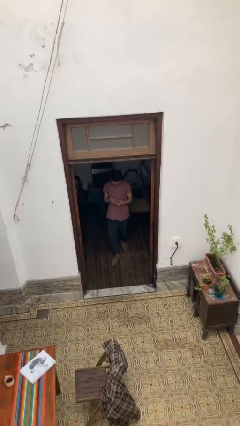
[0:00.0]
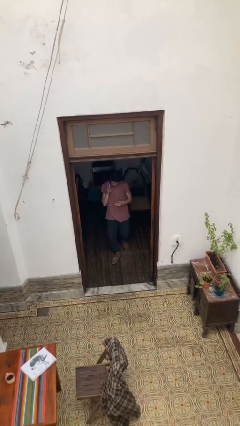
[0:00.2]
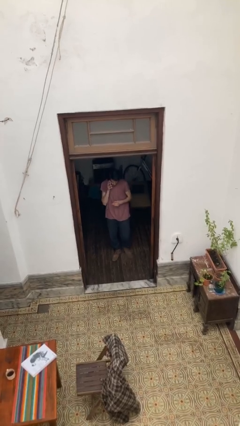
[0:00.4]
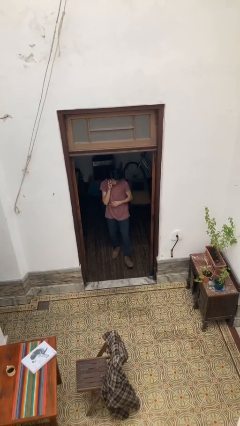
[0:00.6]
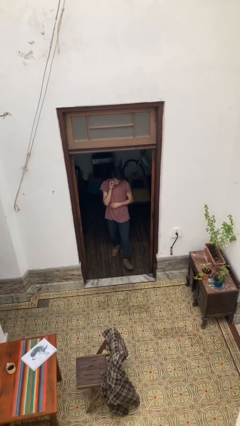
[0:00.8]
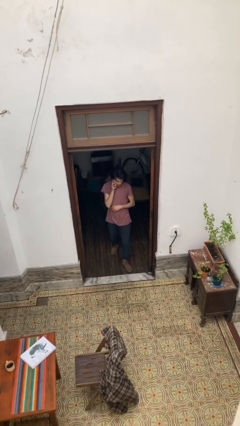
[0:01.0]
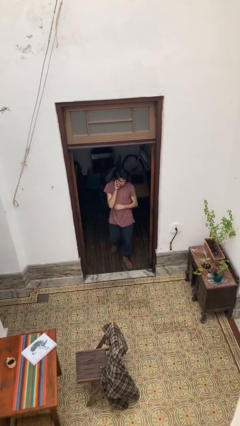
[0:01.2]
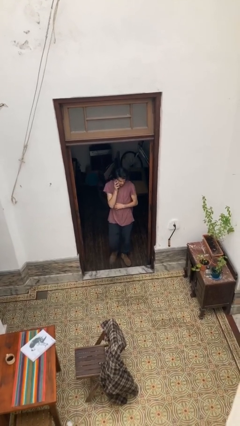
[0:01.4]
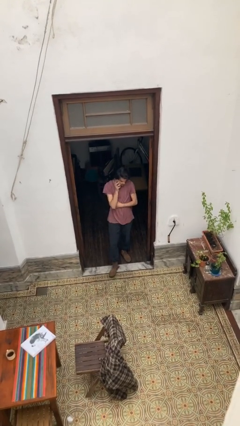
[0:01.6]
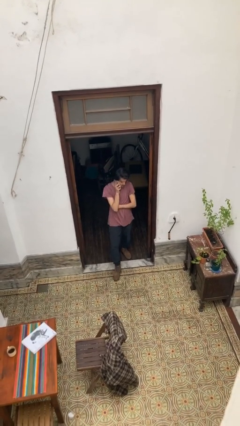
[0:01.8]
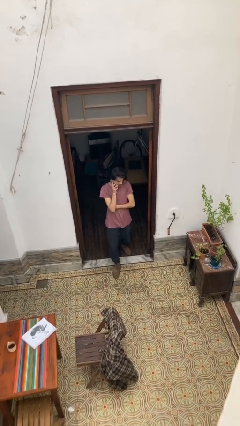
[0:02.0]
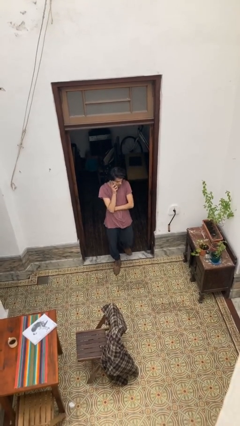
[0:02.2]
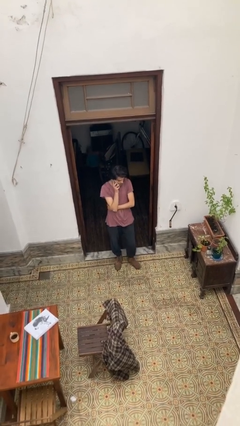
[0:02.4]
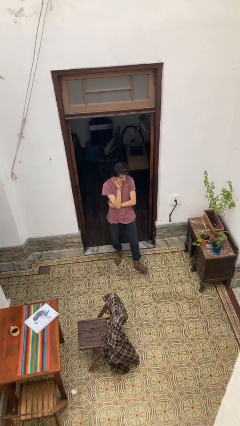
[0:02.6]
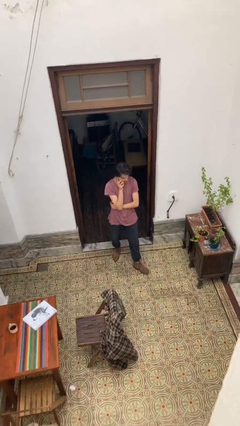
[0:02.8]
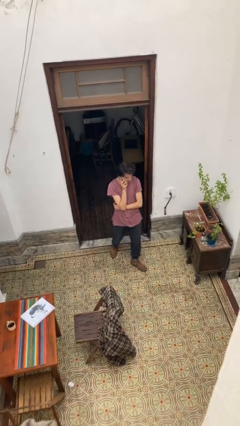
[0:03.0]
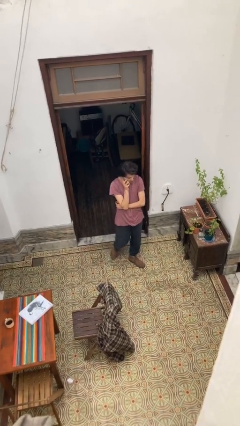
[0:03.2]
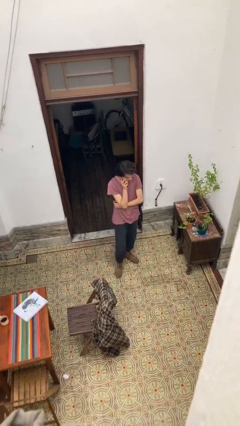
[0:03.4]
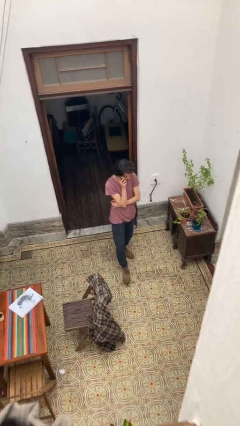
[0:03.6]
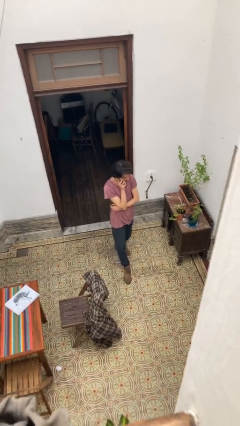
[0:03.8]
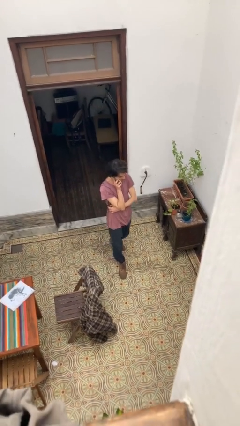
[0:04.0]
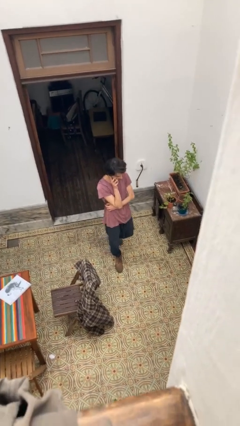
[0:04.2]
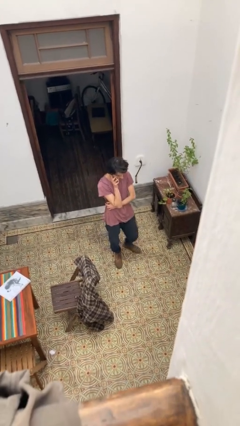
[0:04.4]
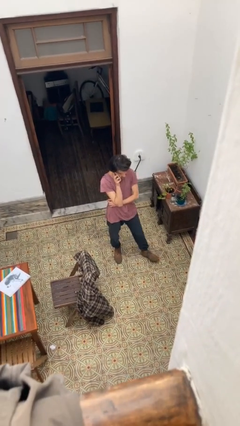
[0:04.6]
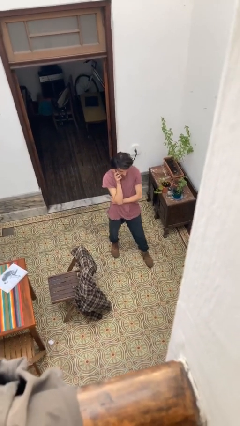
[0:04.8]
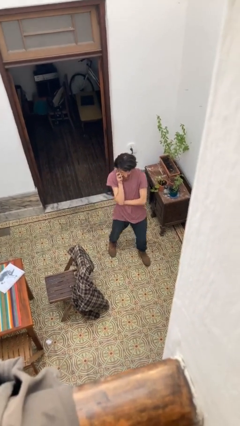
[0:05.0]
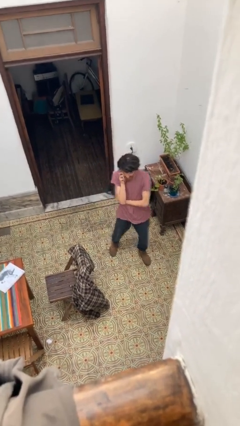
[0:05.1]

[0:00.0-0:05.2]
person enters scene through structure

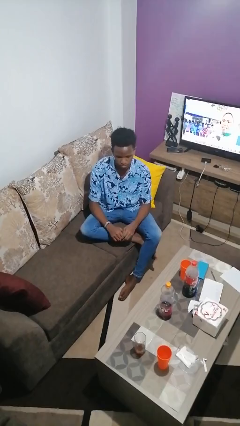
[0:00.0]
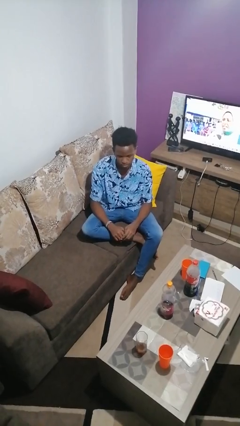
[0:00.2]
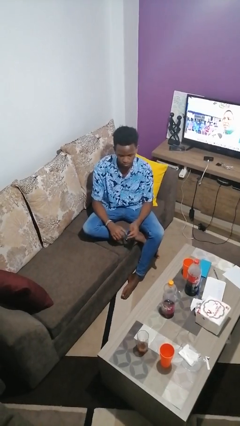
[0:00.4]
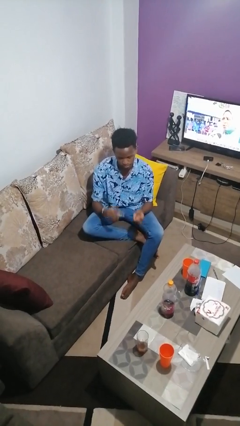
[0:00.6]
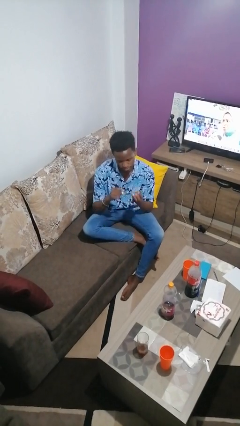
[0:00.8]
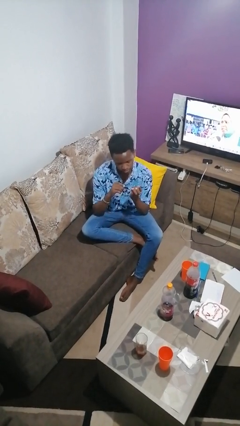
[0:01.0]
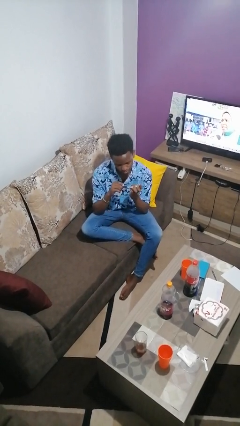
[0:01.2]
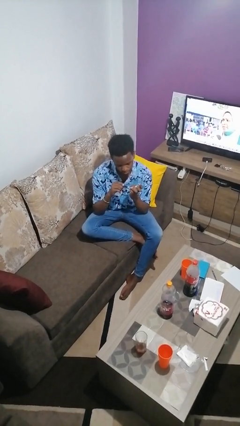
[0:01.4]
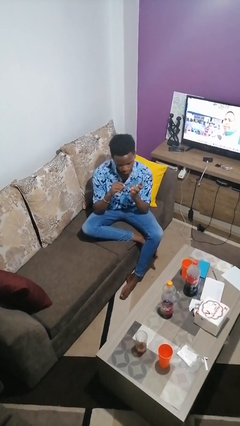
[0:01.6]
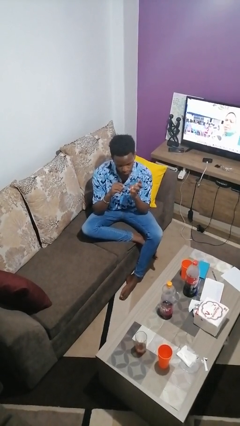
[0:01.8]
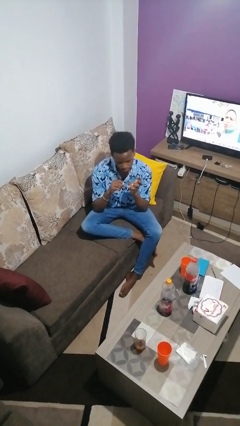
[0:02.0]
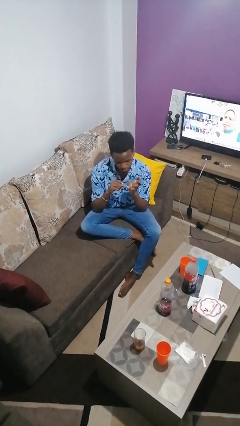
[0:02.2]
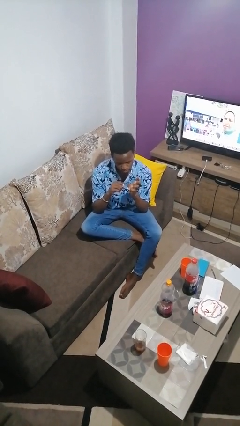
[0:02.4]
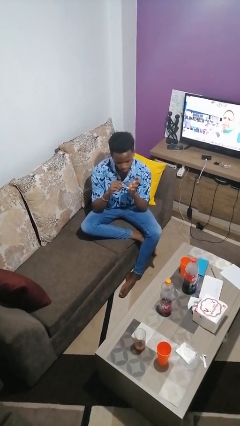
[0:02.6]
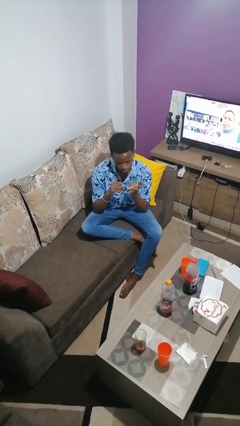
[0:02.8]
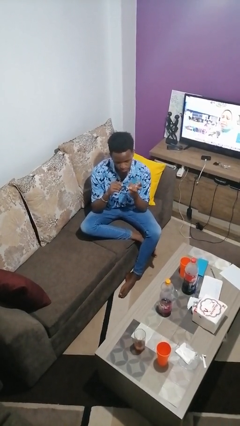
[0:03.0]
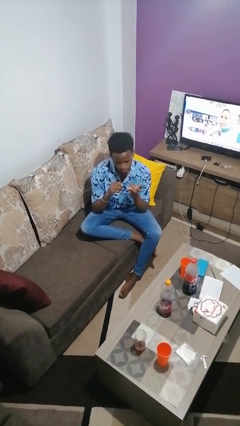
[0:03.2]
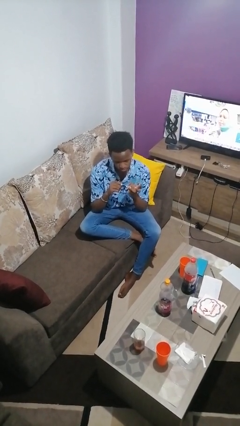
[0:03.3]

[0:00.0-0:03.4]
person clips fingernails

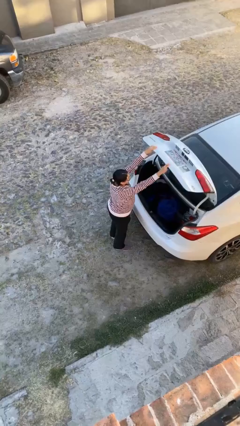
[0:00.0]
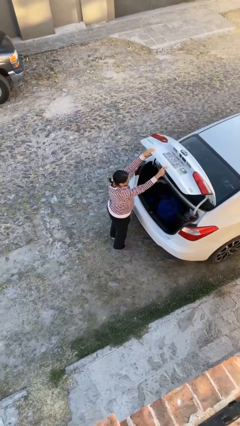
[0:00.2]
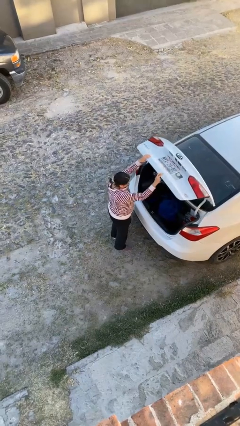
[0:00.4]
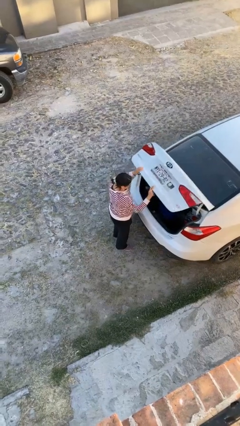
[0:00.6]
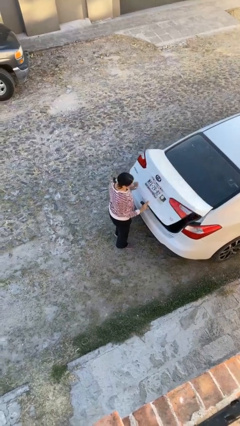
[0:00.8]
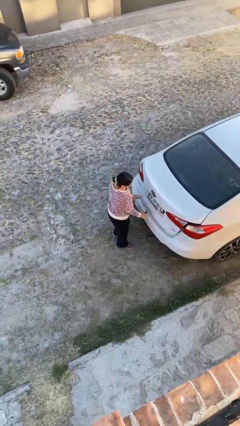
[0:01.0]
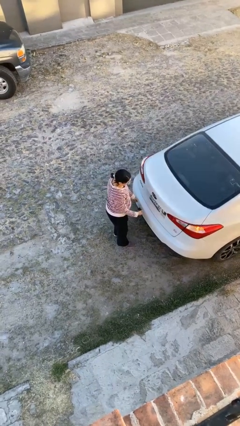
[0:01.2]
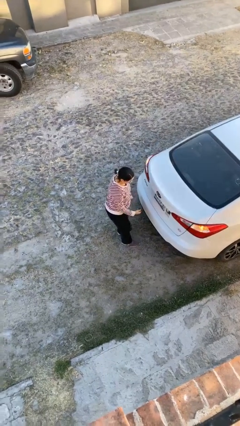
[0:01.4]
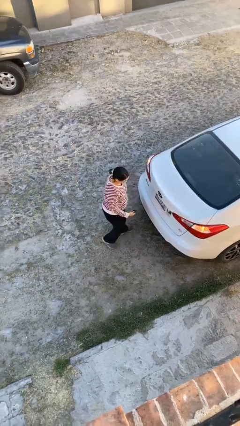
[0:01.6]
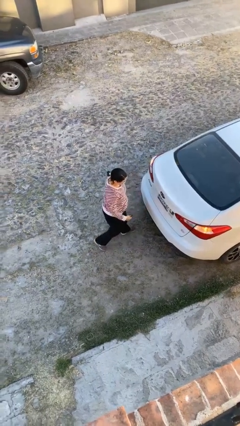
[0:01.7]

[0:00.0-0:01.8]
person closes car trunk

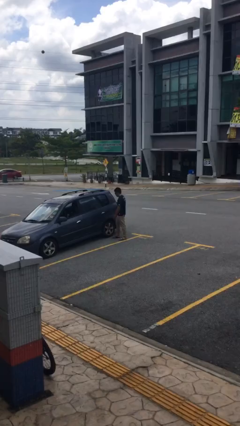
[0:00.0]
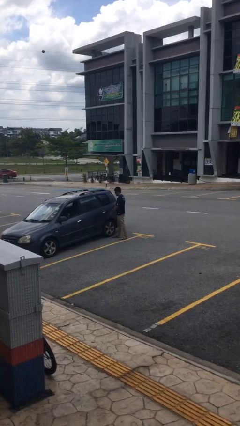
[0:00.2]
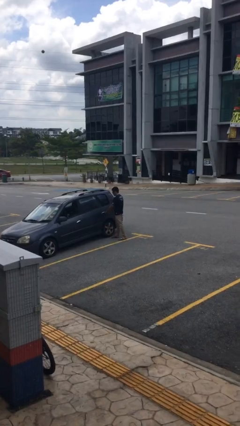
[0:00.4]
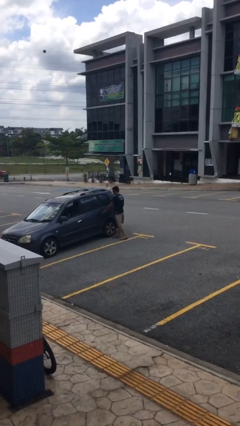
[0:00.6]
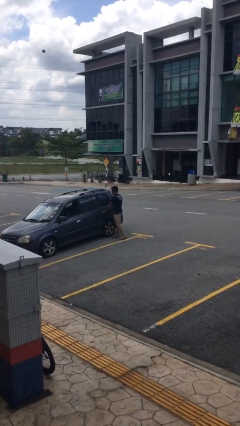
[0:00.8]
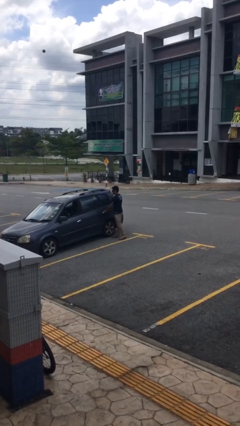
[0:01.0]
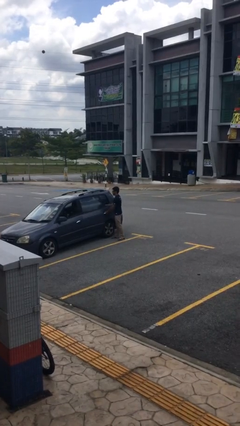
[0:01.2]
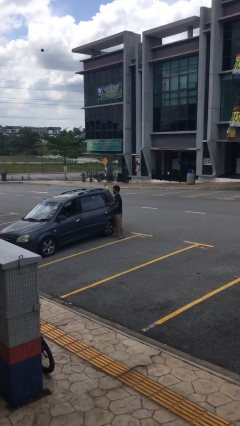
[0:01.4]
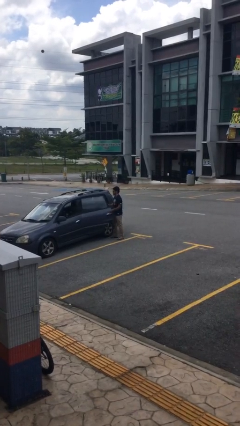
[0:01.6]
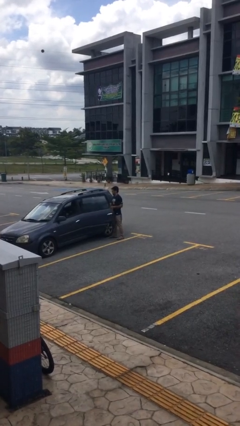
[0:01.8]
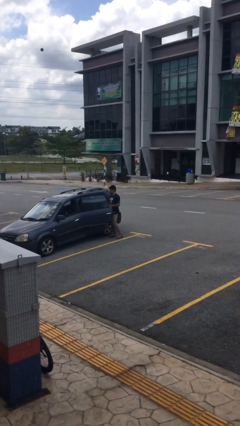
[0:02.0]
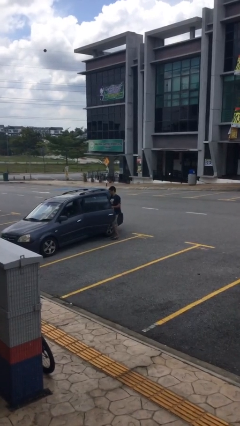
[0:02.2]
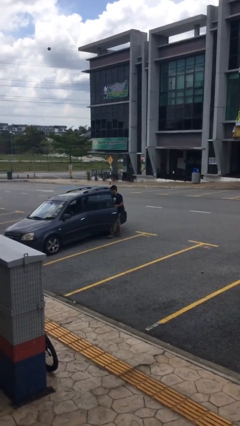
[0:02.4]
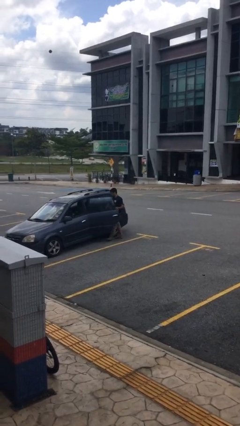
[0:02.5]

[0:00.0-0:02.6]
person opens car door

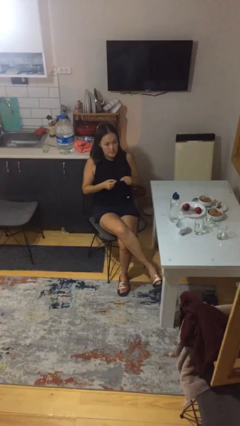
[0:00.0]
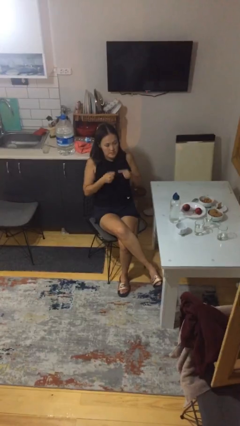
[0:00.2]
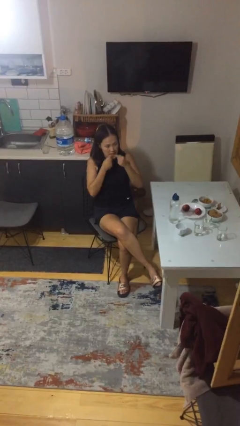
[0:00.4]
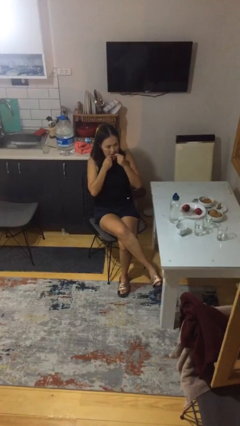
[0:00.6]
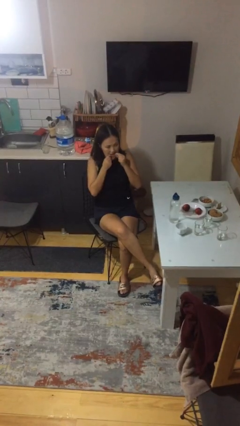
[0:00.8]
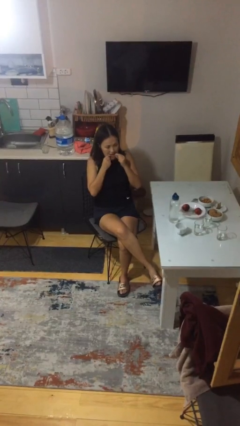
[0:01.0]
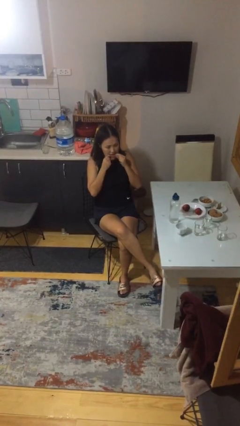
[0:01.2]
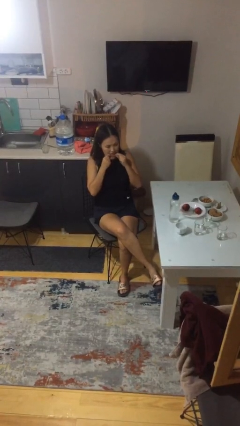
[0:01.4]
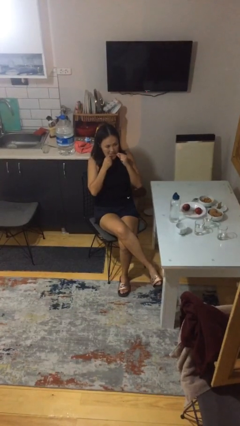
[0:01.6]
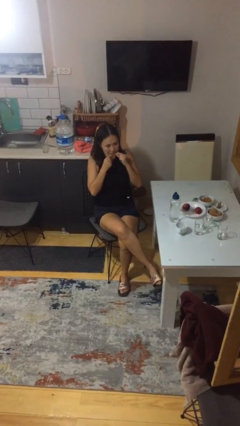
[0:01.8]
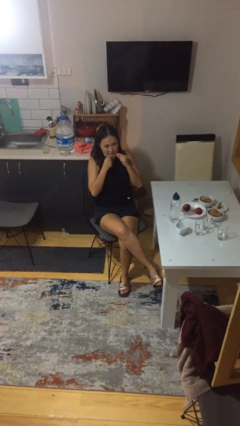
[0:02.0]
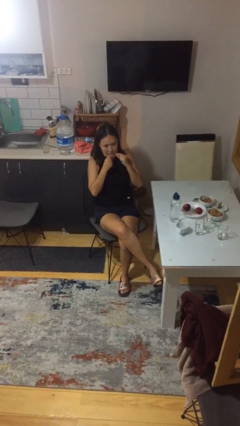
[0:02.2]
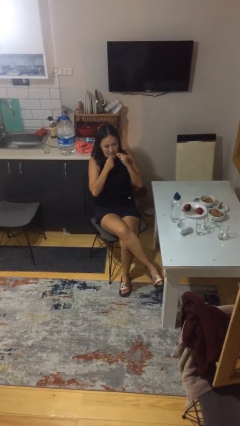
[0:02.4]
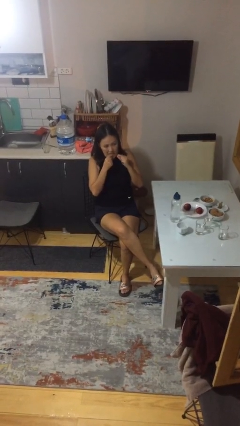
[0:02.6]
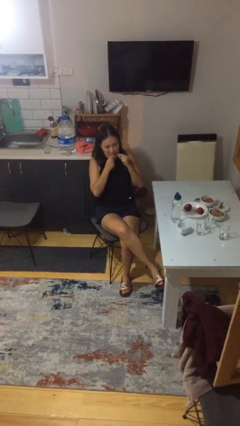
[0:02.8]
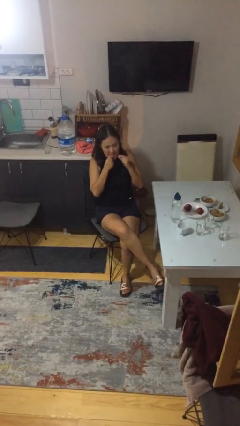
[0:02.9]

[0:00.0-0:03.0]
person flosses

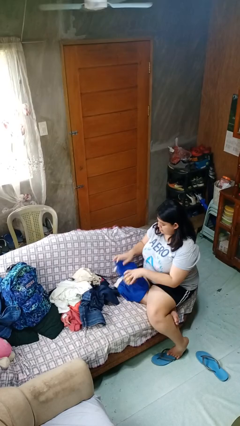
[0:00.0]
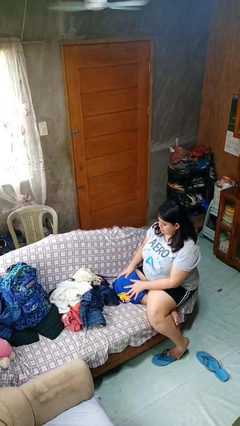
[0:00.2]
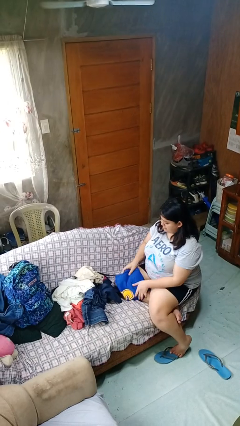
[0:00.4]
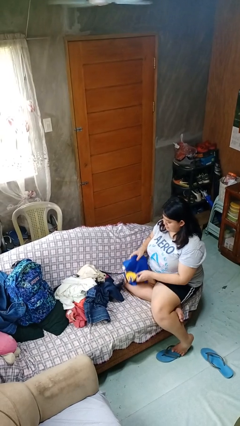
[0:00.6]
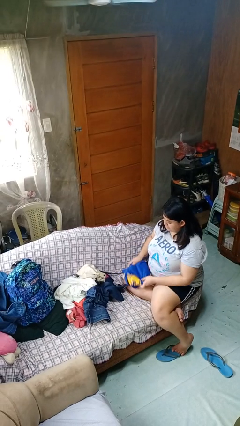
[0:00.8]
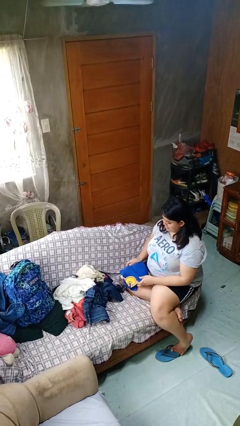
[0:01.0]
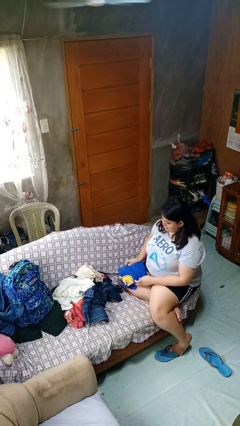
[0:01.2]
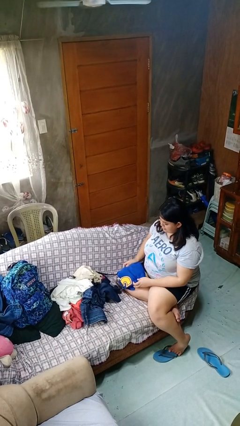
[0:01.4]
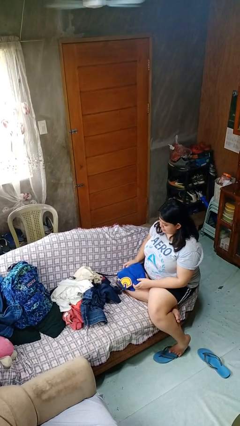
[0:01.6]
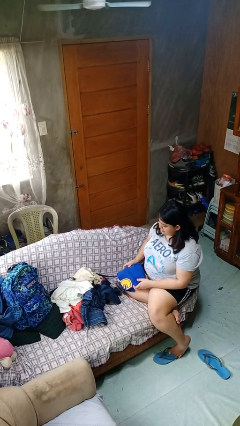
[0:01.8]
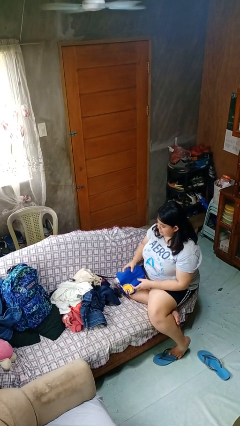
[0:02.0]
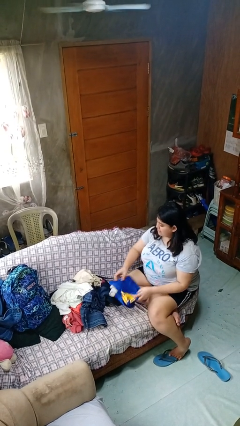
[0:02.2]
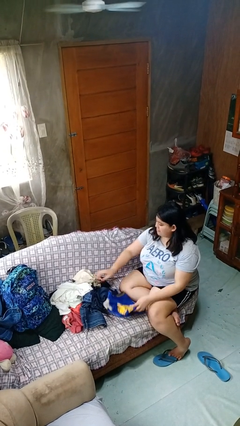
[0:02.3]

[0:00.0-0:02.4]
person folds shirt
